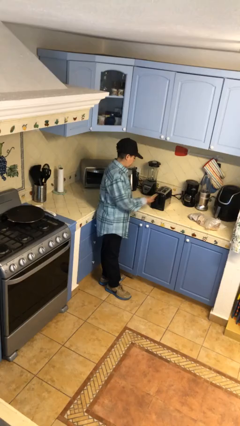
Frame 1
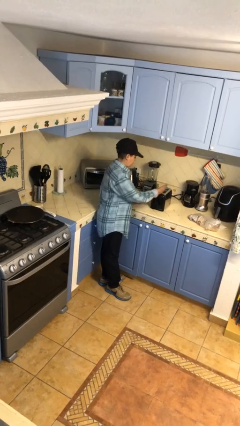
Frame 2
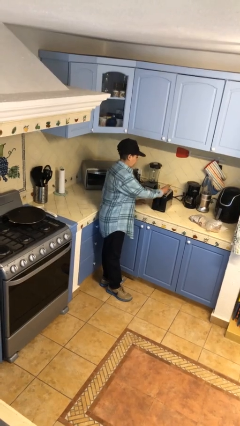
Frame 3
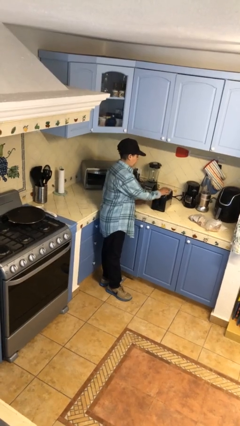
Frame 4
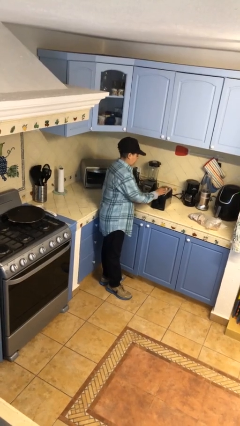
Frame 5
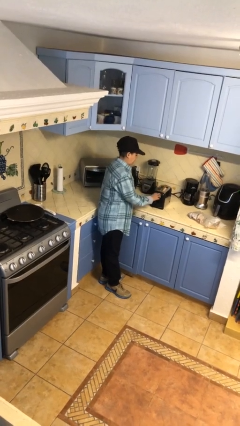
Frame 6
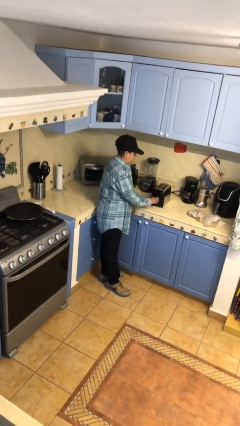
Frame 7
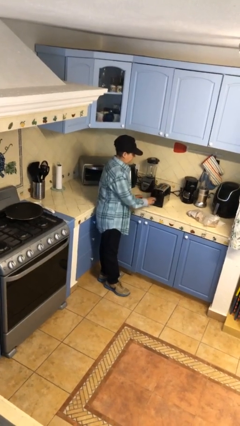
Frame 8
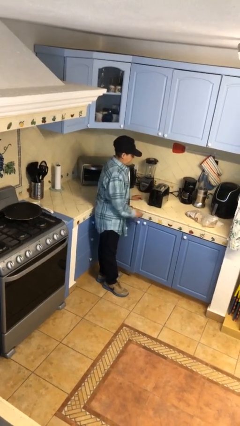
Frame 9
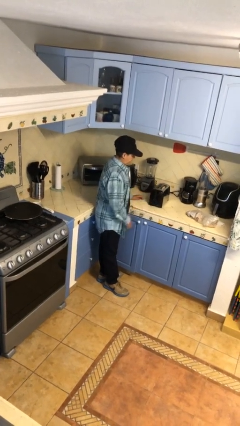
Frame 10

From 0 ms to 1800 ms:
person puts object into toaster

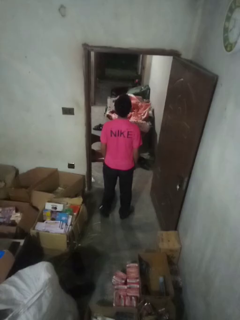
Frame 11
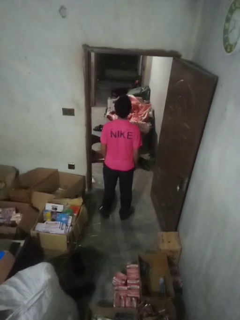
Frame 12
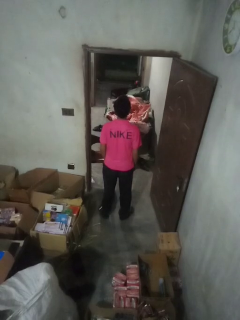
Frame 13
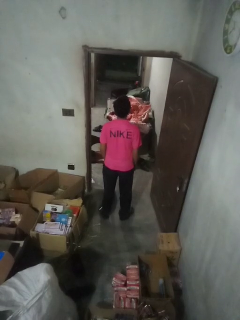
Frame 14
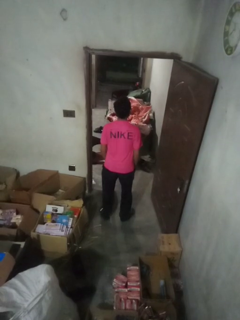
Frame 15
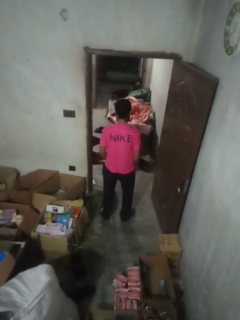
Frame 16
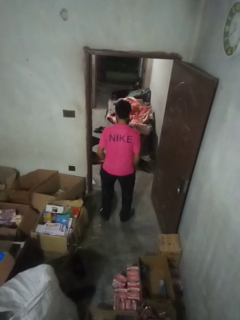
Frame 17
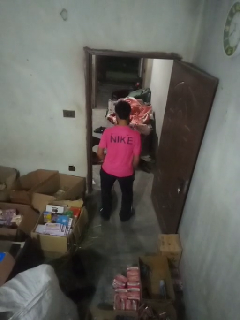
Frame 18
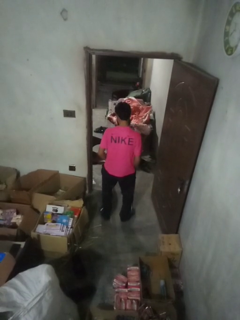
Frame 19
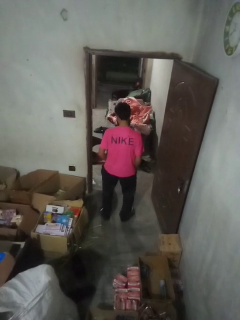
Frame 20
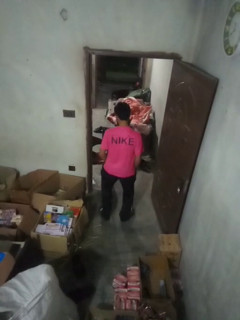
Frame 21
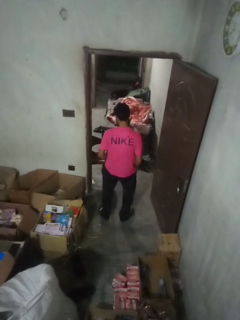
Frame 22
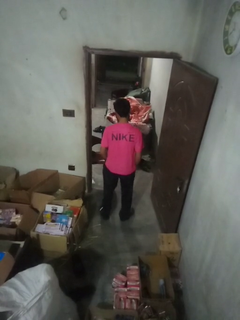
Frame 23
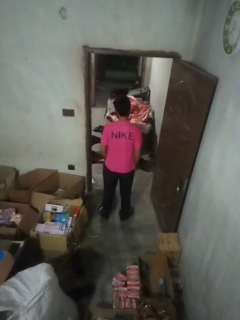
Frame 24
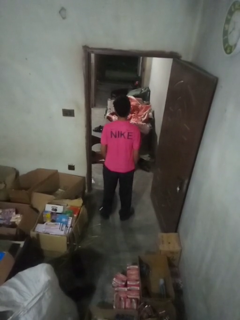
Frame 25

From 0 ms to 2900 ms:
person wiggles hips

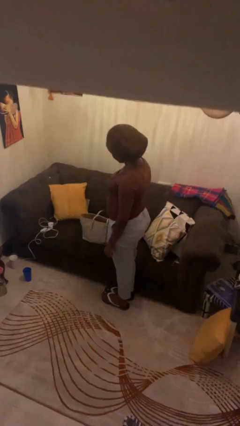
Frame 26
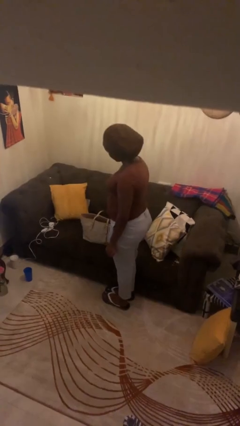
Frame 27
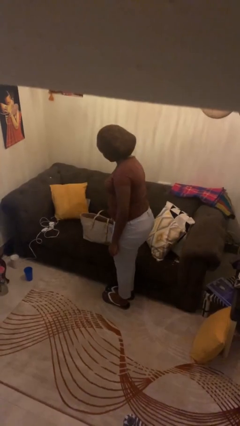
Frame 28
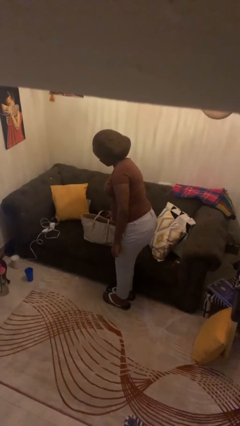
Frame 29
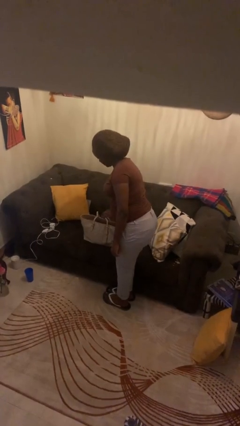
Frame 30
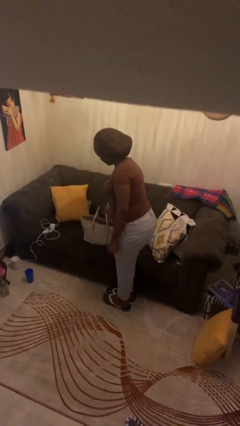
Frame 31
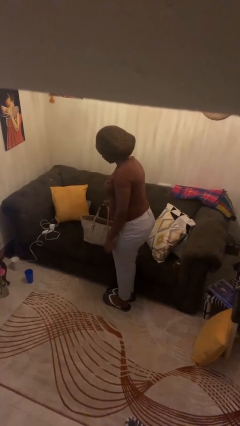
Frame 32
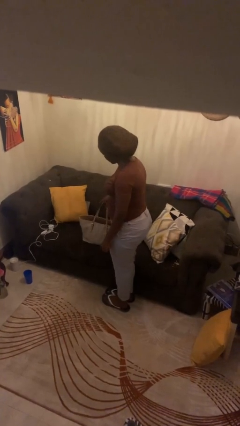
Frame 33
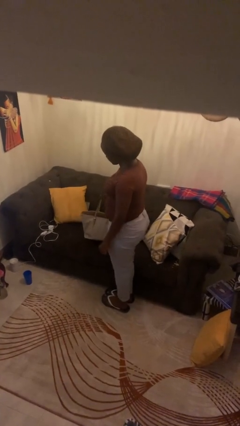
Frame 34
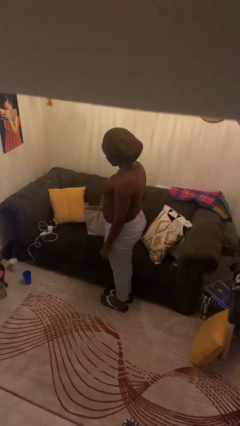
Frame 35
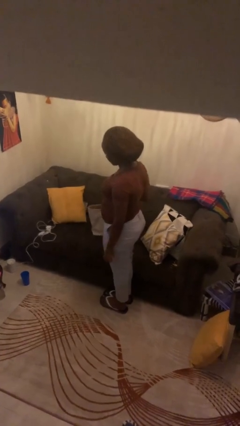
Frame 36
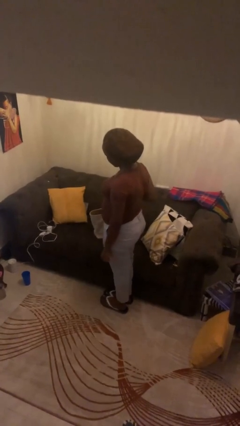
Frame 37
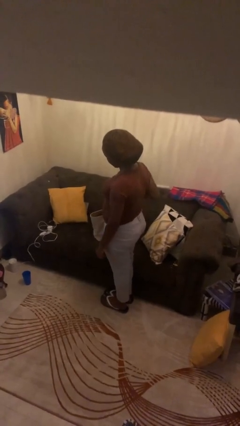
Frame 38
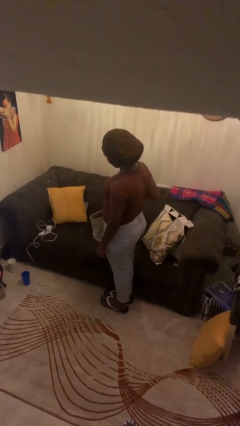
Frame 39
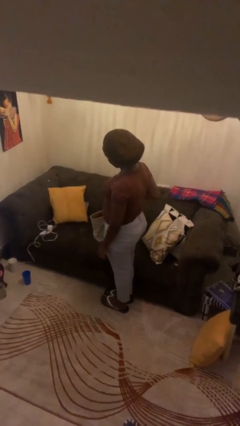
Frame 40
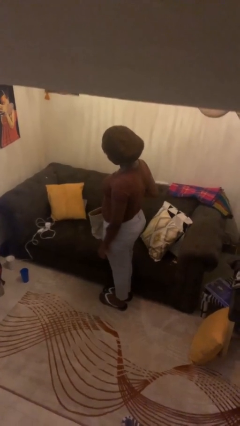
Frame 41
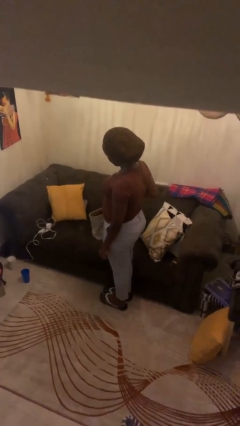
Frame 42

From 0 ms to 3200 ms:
person picks up object from couch

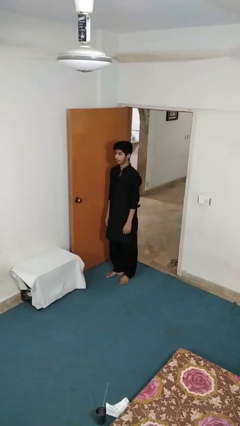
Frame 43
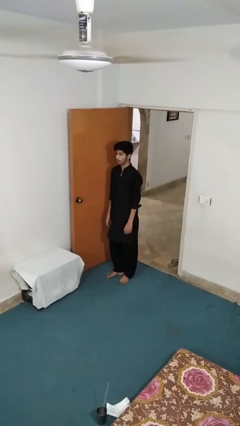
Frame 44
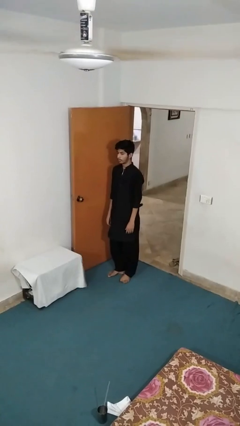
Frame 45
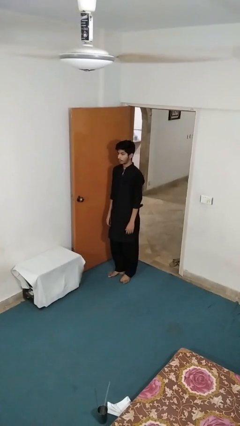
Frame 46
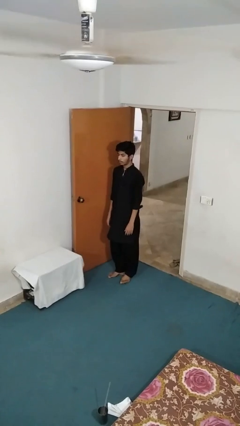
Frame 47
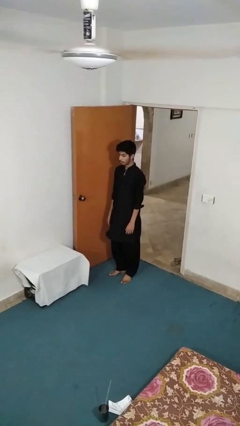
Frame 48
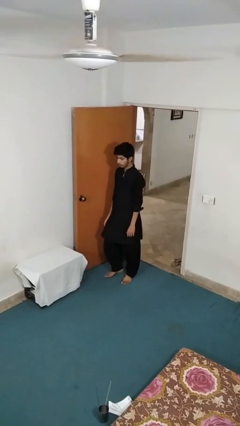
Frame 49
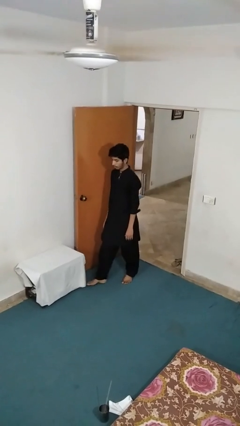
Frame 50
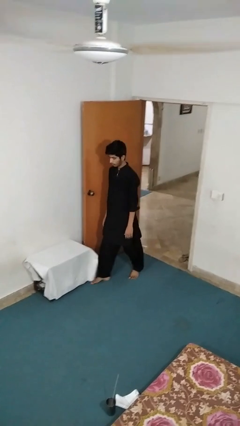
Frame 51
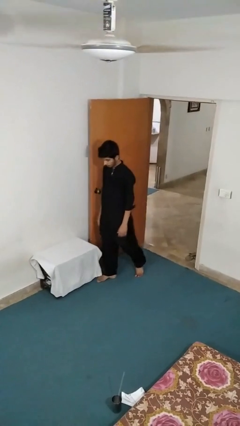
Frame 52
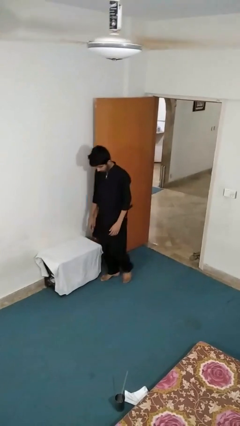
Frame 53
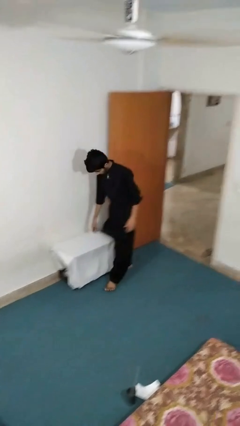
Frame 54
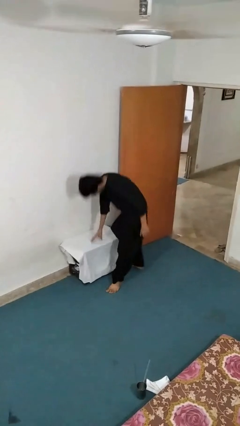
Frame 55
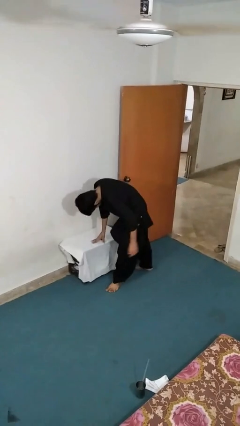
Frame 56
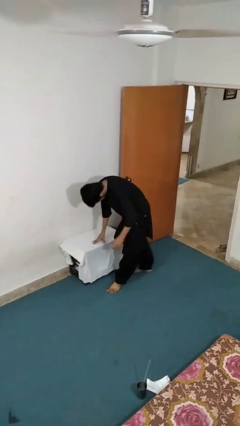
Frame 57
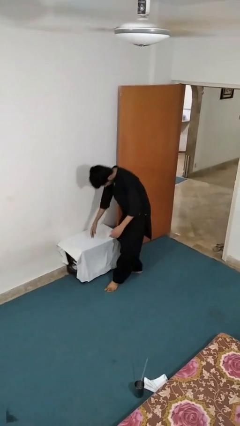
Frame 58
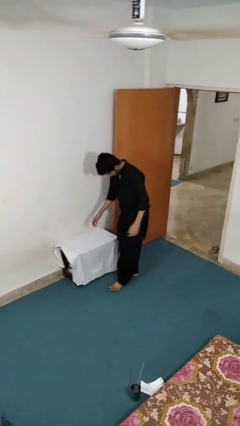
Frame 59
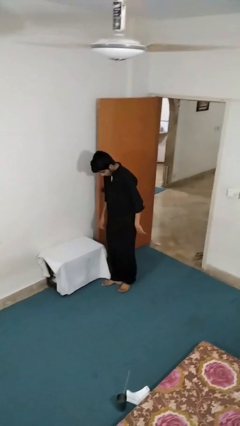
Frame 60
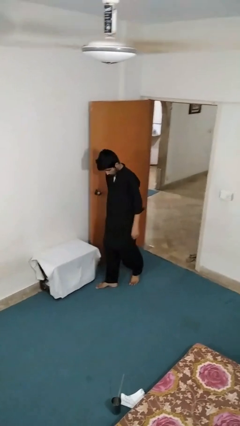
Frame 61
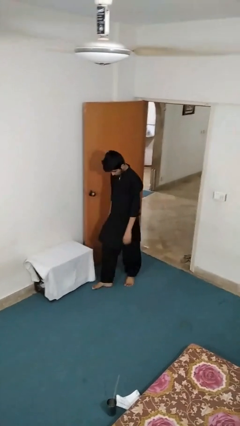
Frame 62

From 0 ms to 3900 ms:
person bumps into table

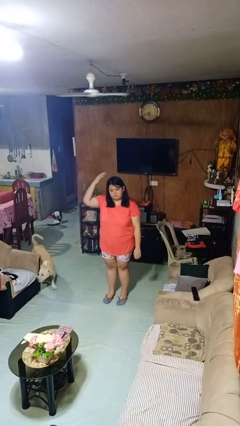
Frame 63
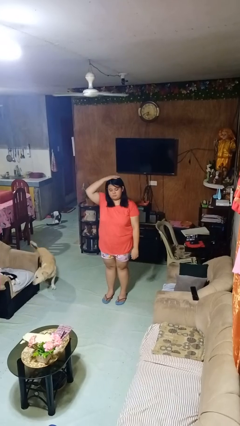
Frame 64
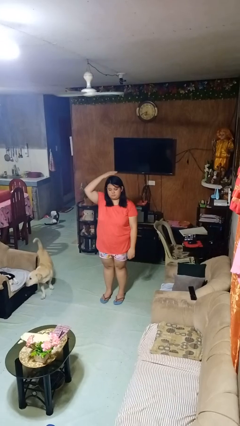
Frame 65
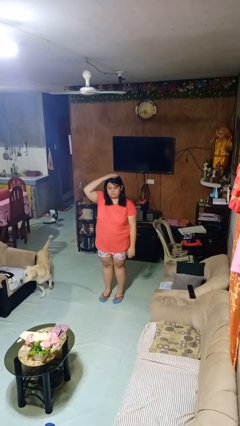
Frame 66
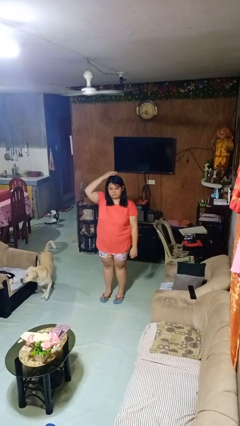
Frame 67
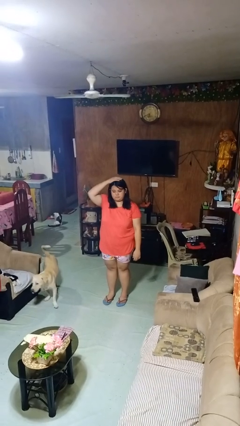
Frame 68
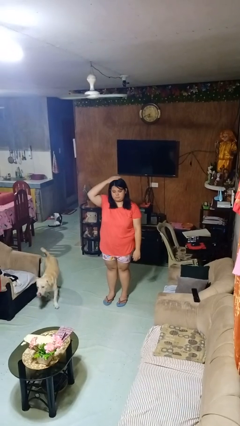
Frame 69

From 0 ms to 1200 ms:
person pats head

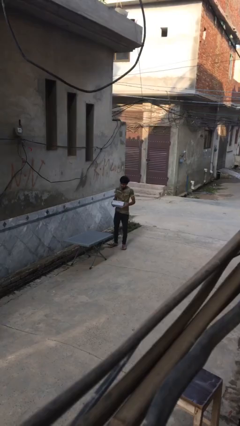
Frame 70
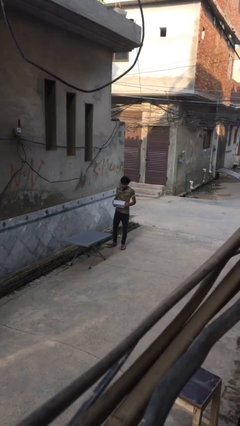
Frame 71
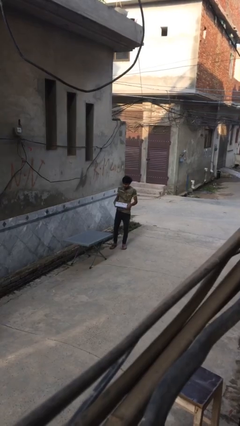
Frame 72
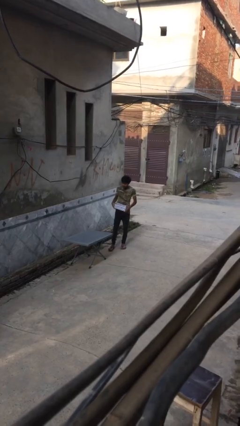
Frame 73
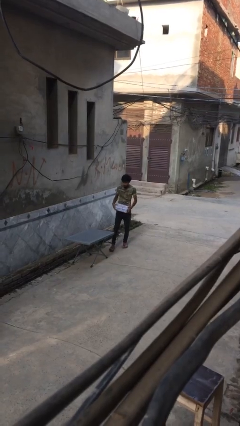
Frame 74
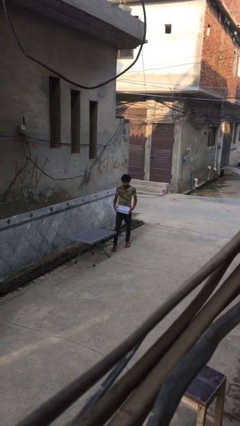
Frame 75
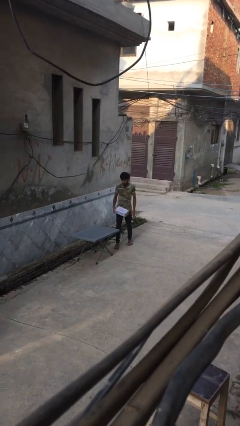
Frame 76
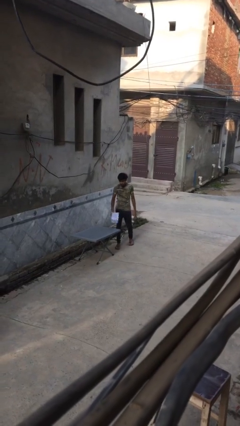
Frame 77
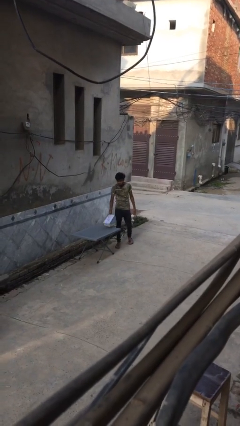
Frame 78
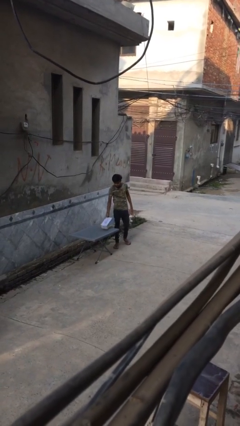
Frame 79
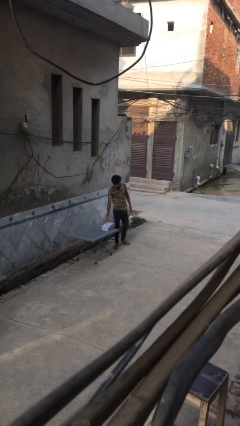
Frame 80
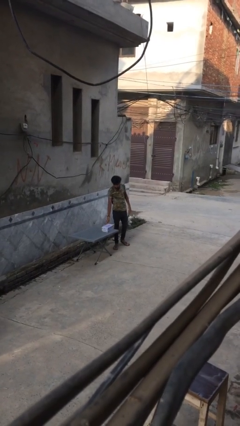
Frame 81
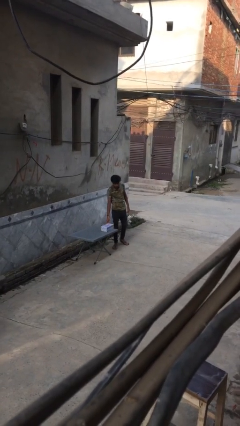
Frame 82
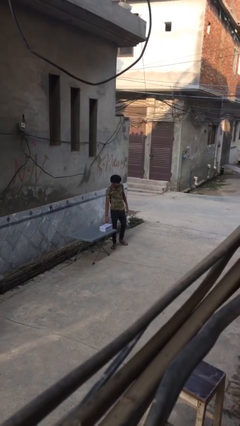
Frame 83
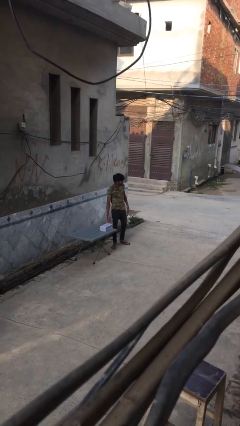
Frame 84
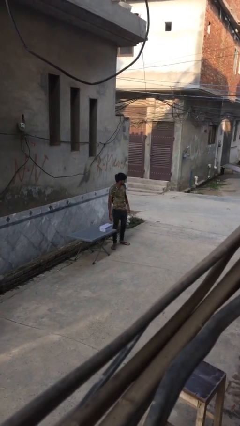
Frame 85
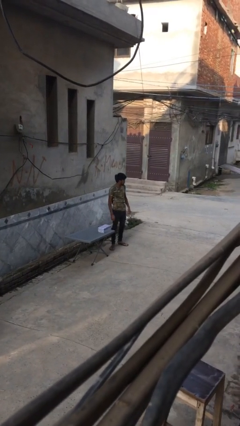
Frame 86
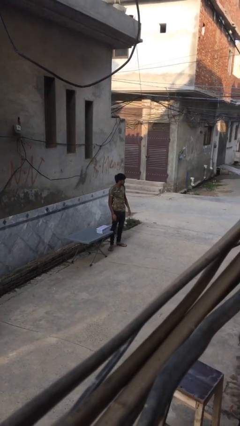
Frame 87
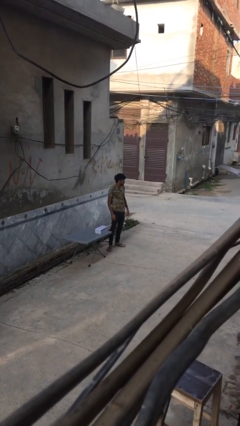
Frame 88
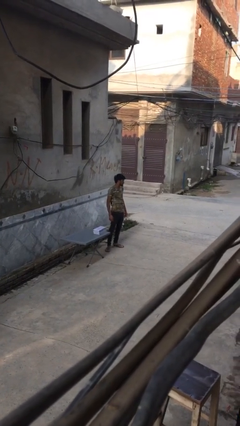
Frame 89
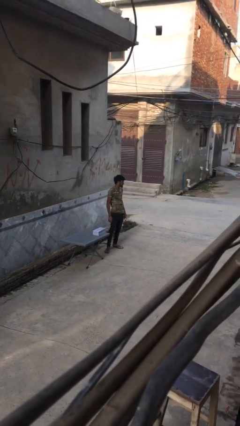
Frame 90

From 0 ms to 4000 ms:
person puts down object on table

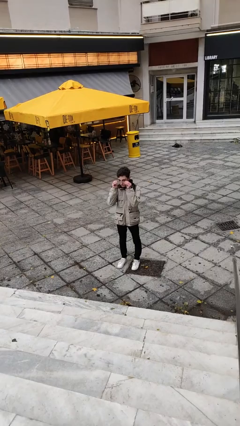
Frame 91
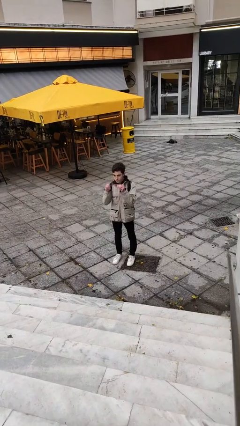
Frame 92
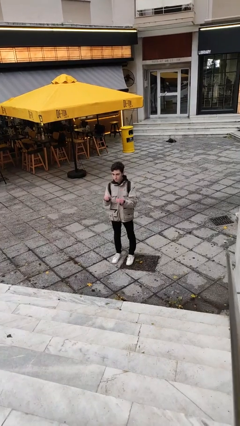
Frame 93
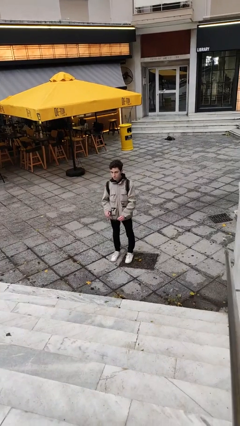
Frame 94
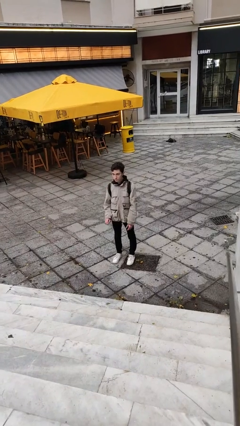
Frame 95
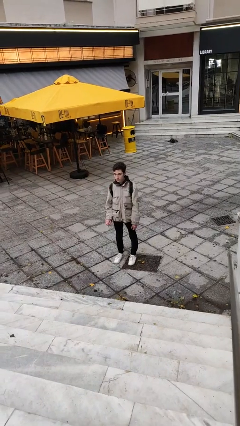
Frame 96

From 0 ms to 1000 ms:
person takes off glasses
